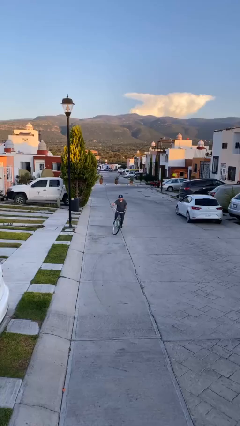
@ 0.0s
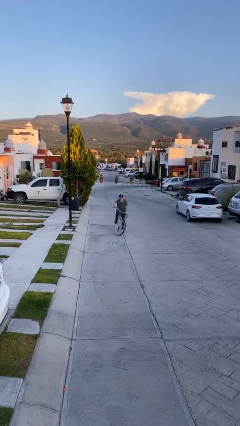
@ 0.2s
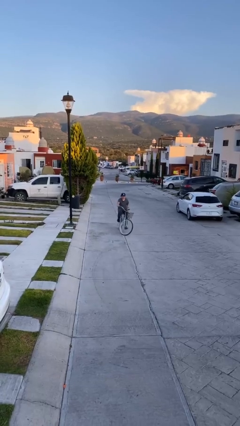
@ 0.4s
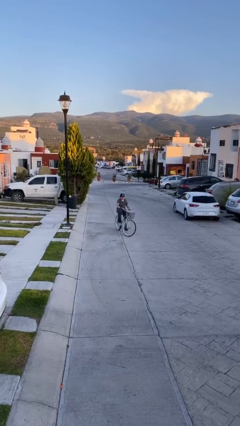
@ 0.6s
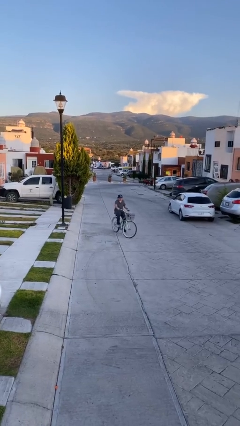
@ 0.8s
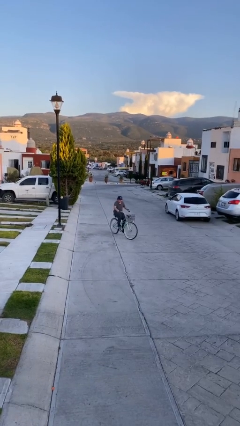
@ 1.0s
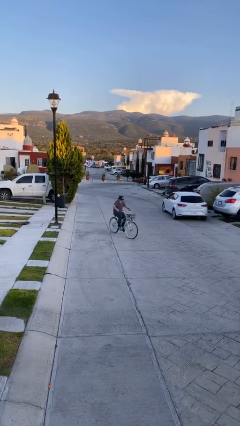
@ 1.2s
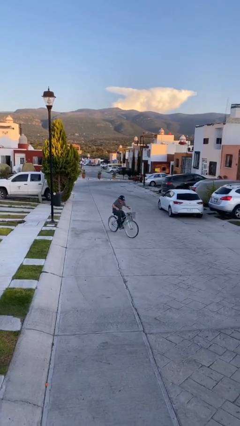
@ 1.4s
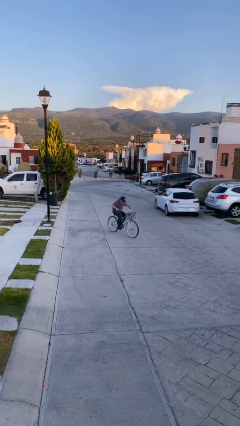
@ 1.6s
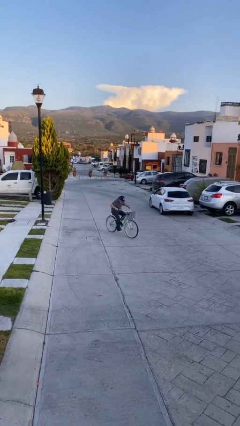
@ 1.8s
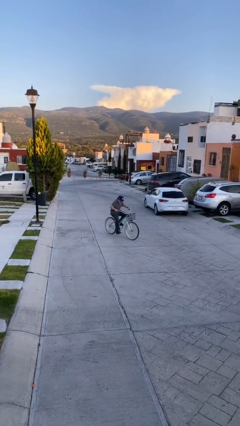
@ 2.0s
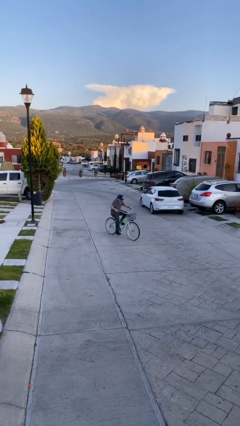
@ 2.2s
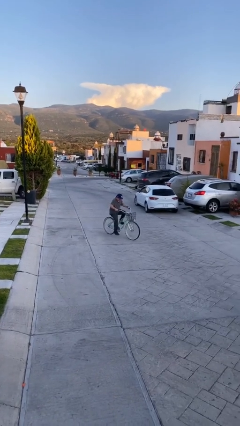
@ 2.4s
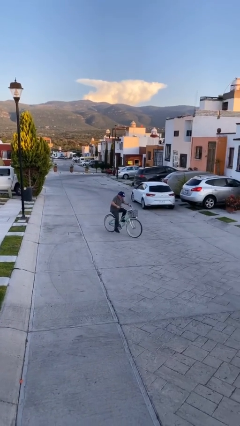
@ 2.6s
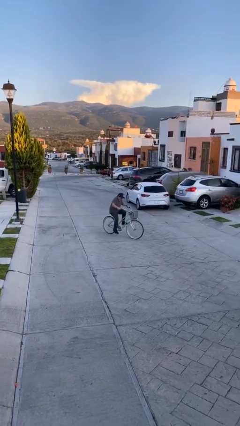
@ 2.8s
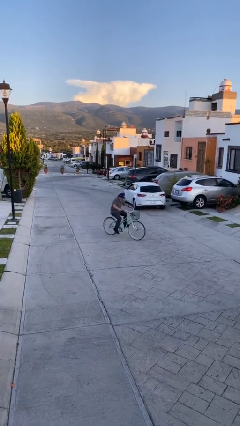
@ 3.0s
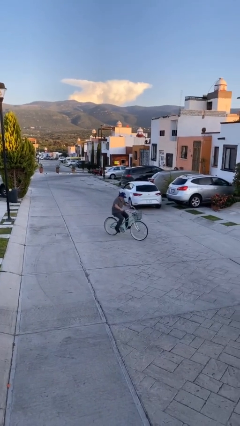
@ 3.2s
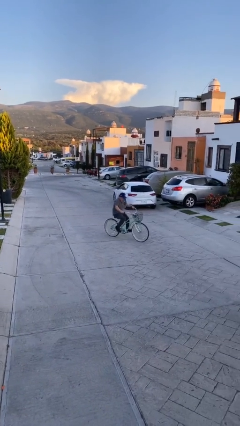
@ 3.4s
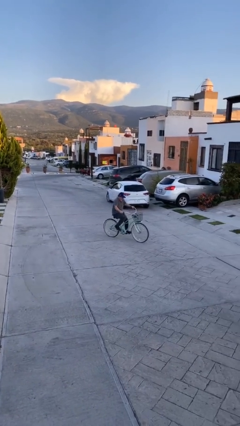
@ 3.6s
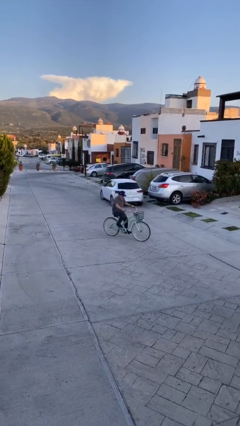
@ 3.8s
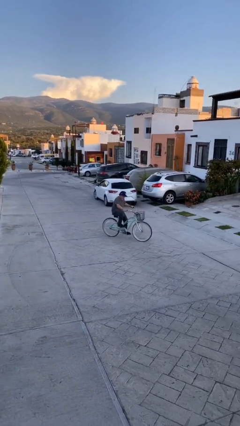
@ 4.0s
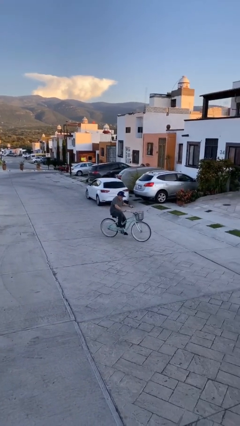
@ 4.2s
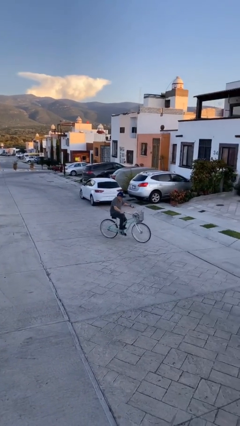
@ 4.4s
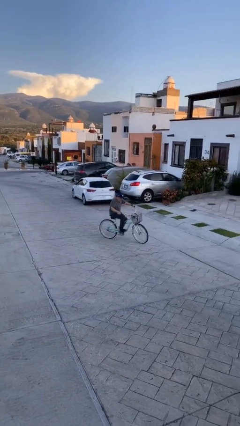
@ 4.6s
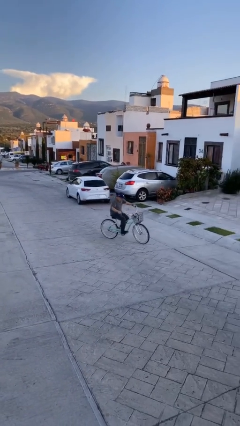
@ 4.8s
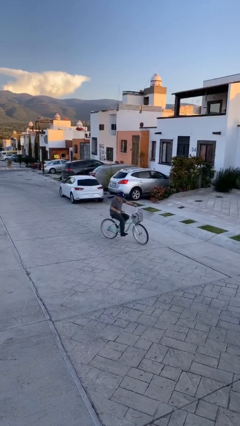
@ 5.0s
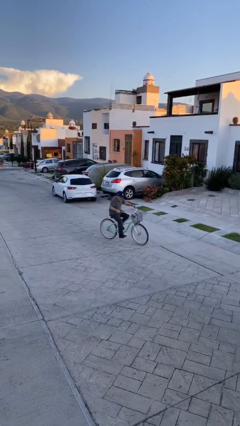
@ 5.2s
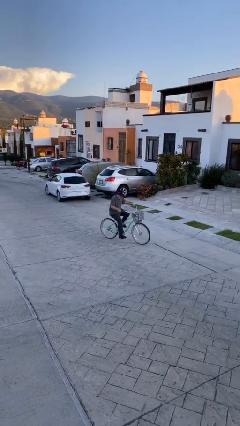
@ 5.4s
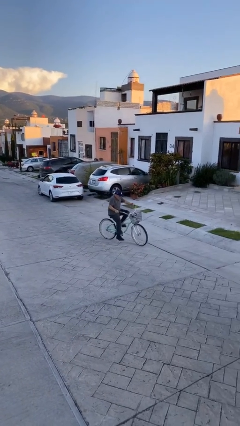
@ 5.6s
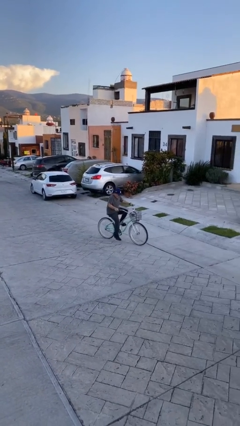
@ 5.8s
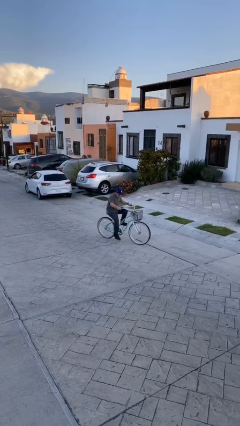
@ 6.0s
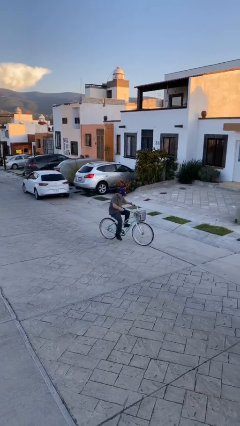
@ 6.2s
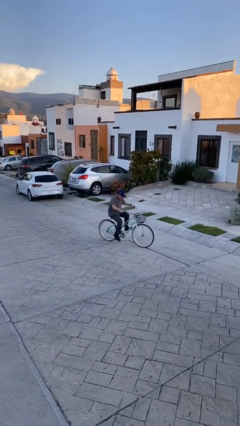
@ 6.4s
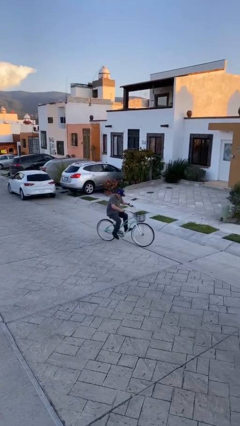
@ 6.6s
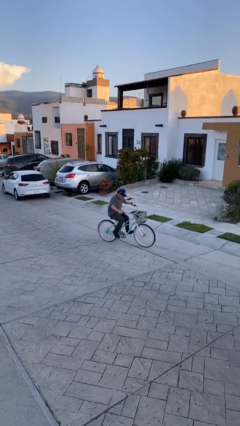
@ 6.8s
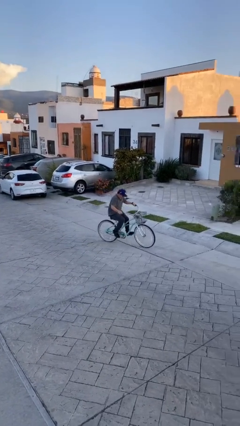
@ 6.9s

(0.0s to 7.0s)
person rides bicycle

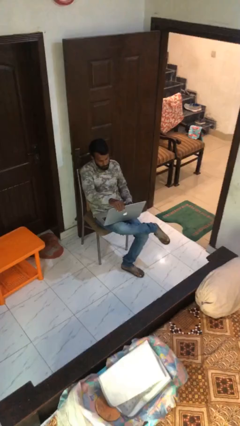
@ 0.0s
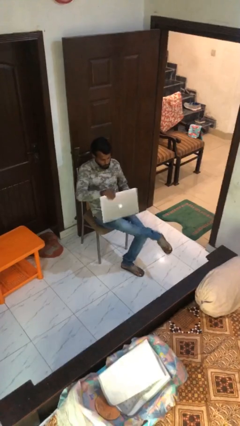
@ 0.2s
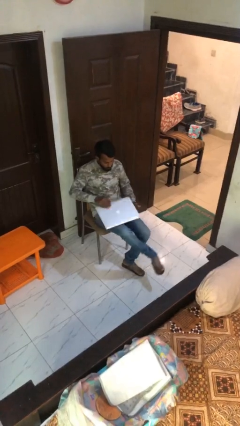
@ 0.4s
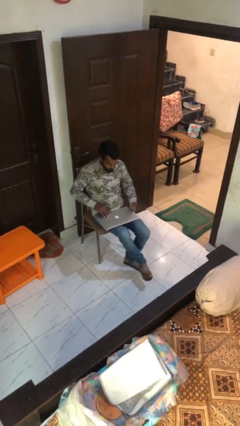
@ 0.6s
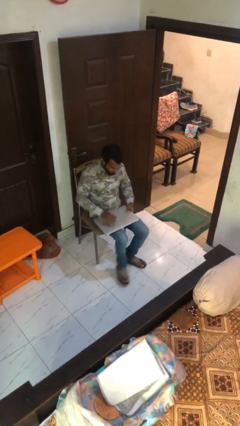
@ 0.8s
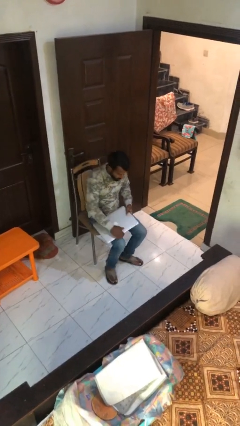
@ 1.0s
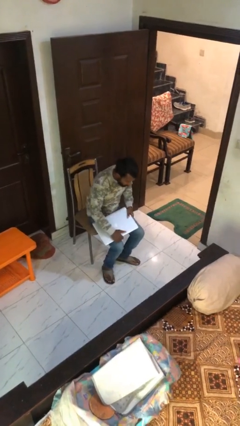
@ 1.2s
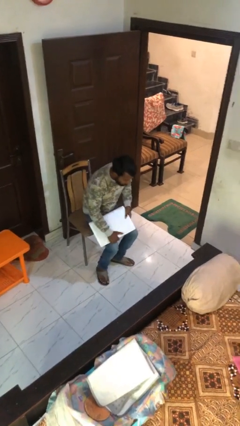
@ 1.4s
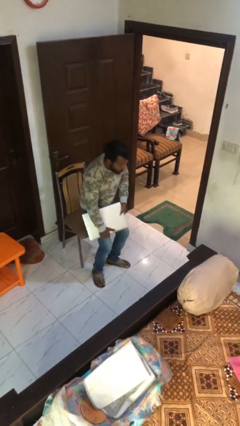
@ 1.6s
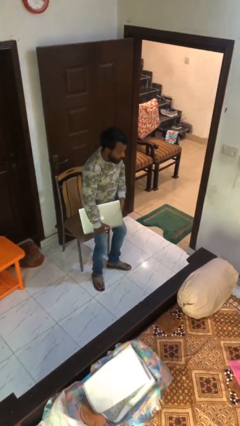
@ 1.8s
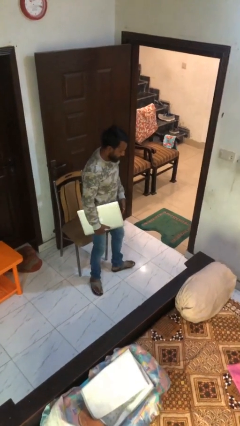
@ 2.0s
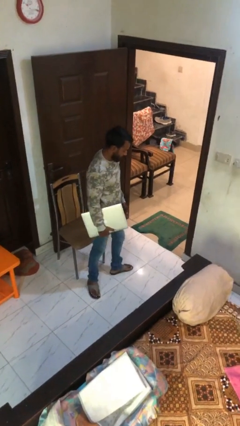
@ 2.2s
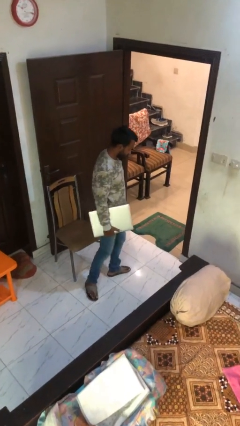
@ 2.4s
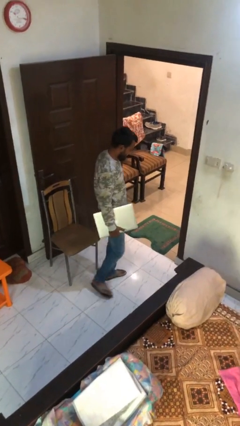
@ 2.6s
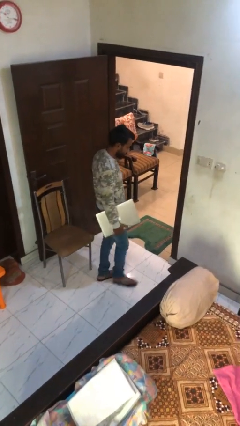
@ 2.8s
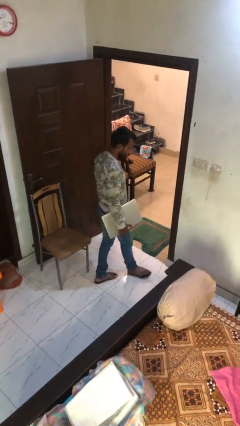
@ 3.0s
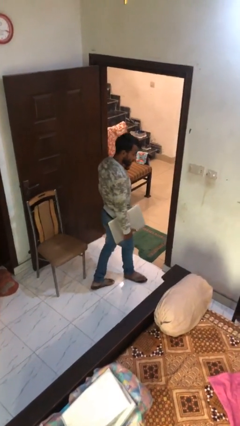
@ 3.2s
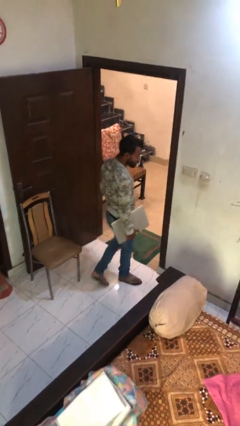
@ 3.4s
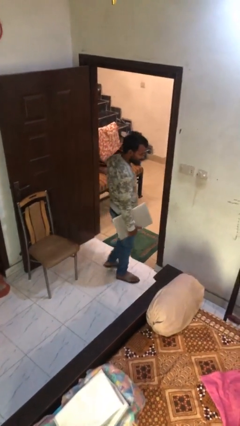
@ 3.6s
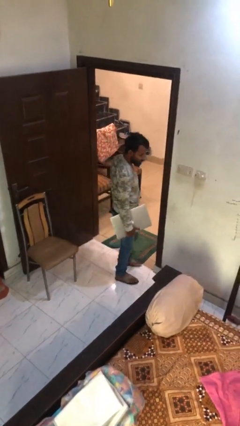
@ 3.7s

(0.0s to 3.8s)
person stands up

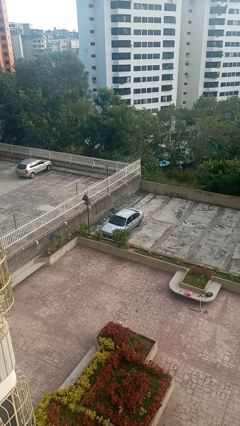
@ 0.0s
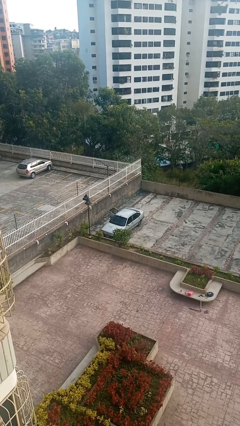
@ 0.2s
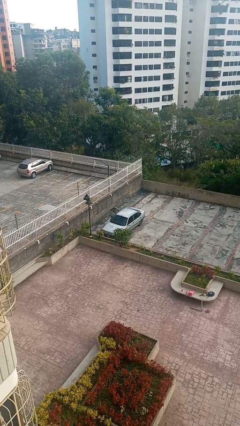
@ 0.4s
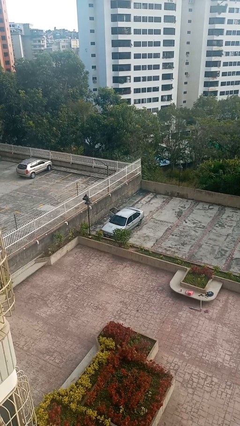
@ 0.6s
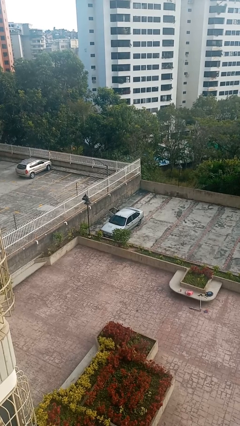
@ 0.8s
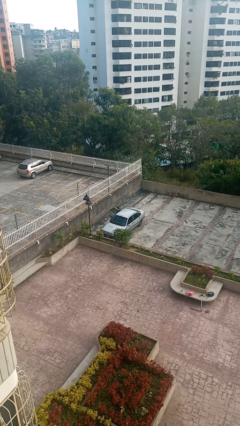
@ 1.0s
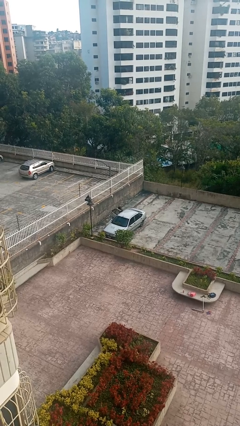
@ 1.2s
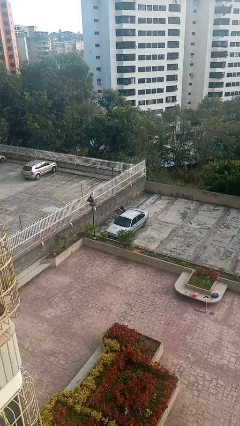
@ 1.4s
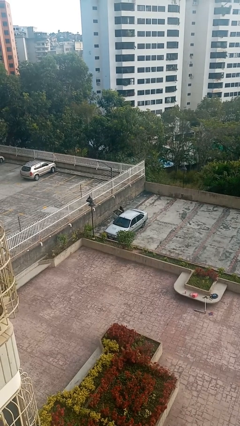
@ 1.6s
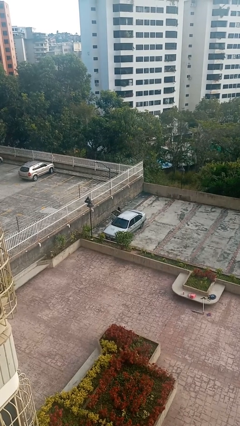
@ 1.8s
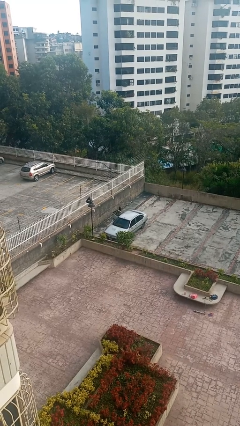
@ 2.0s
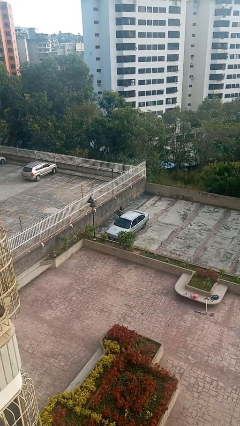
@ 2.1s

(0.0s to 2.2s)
person exits car

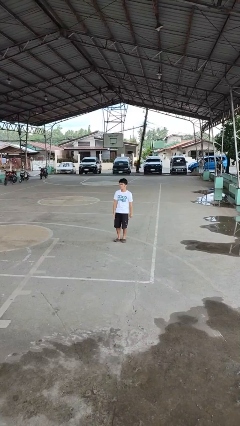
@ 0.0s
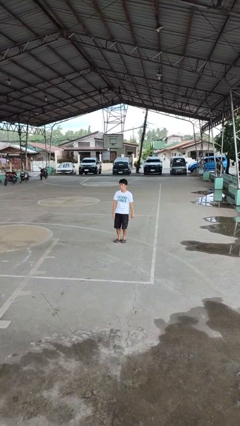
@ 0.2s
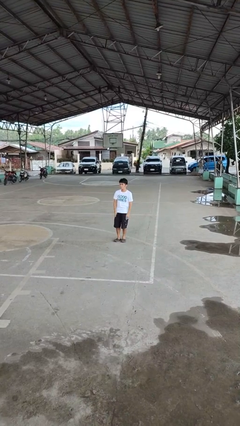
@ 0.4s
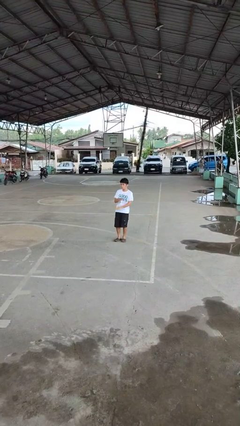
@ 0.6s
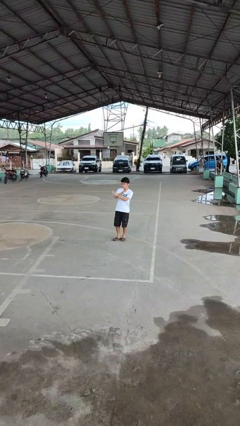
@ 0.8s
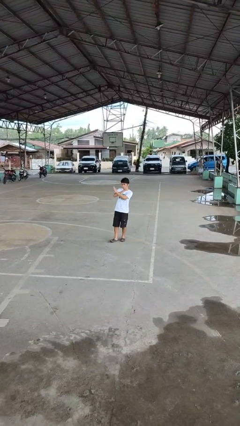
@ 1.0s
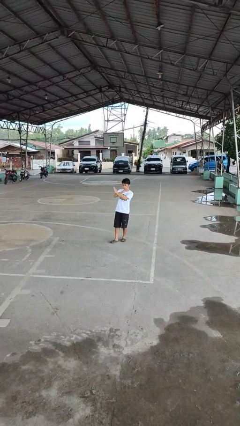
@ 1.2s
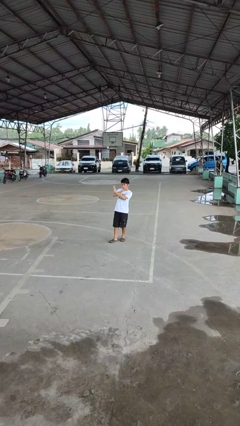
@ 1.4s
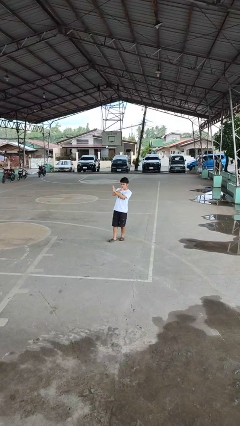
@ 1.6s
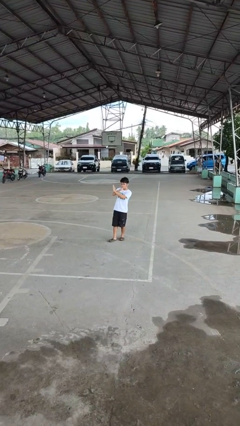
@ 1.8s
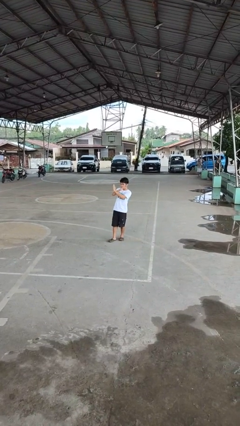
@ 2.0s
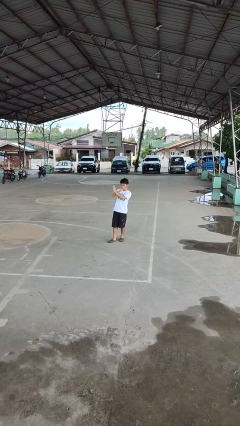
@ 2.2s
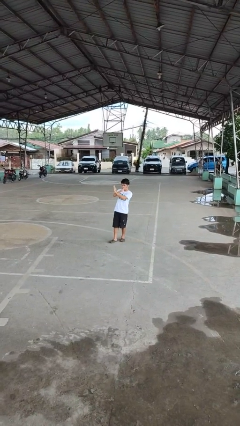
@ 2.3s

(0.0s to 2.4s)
person gestures arms x

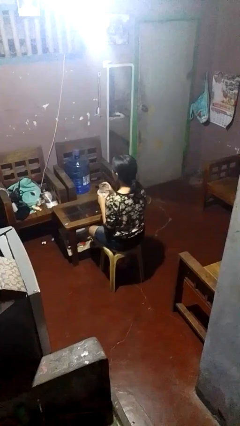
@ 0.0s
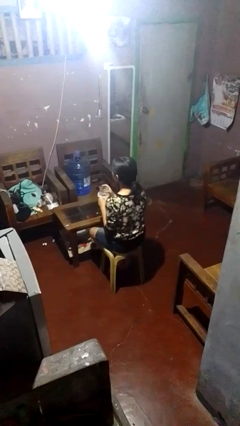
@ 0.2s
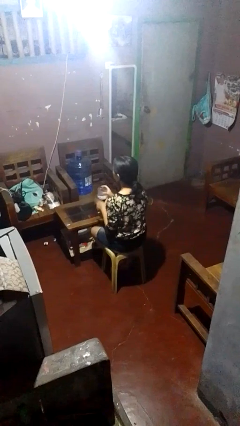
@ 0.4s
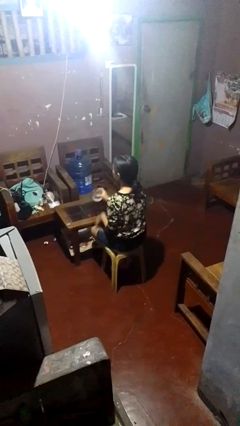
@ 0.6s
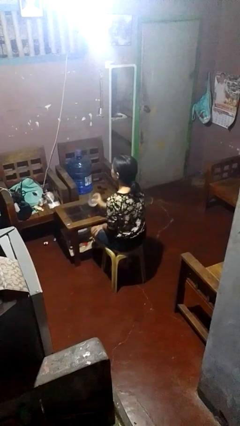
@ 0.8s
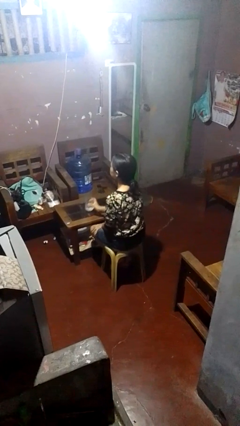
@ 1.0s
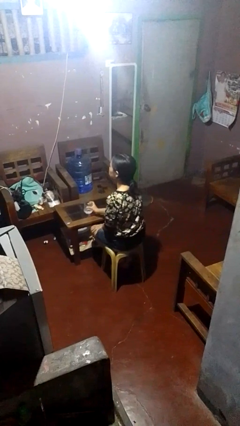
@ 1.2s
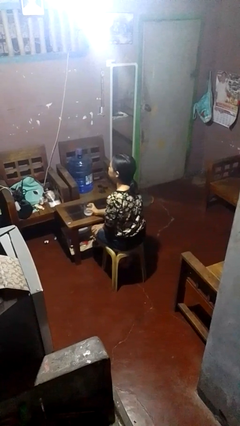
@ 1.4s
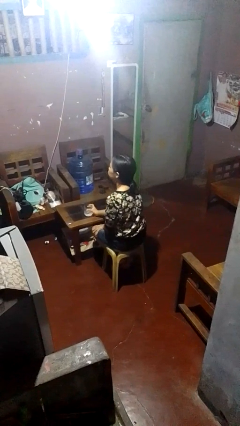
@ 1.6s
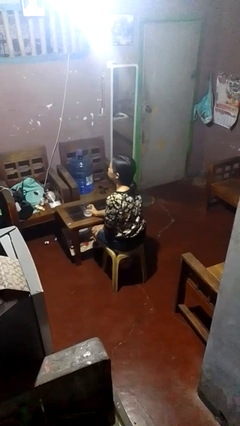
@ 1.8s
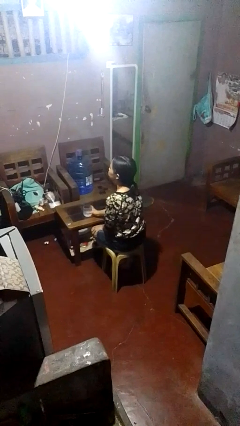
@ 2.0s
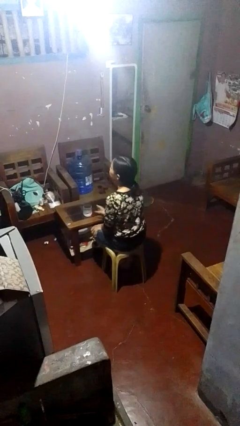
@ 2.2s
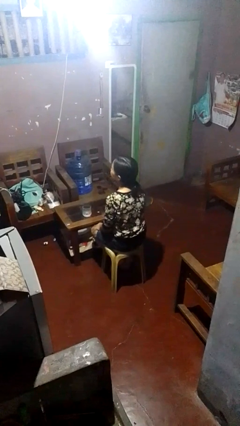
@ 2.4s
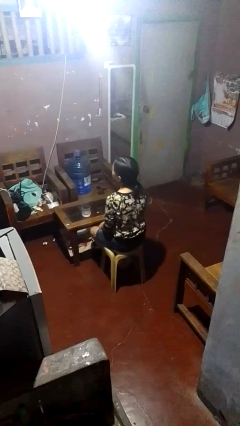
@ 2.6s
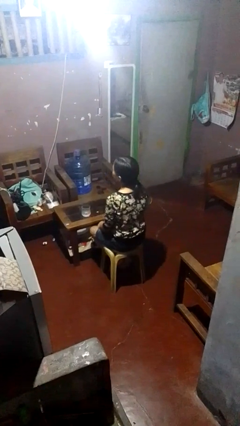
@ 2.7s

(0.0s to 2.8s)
person puts down object on table
